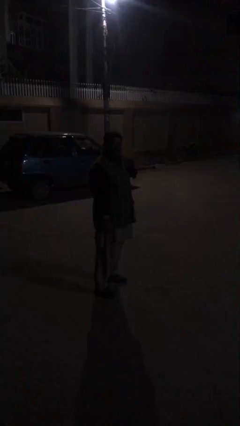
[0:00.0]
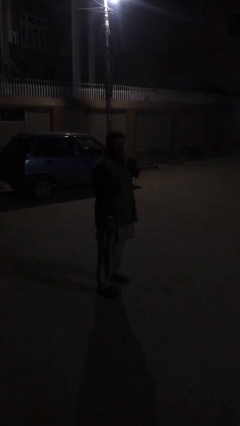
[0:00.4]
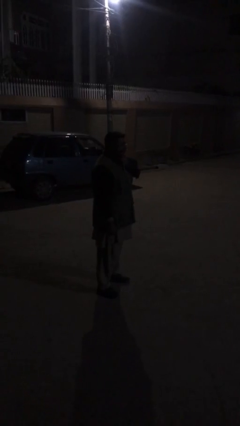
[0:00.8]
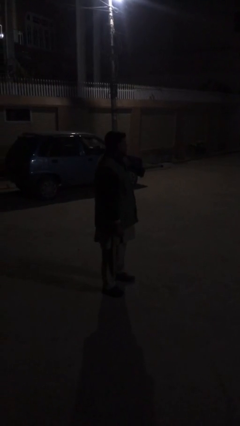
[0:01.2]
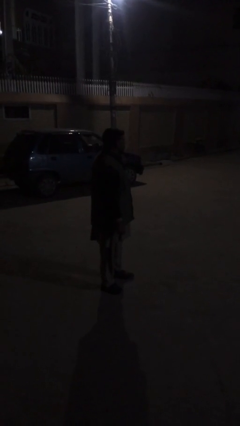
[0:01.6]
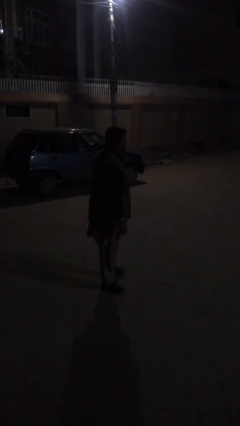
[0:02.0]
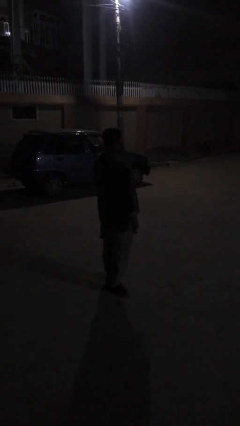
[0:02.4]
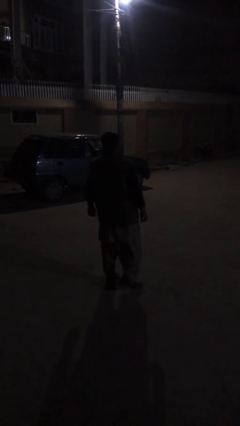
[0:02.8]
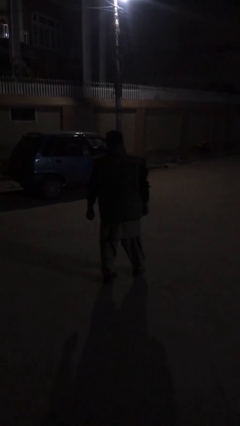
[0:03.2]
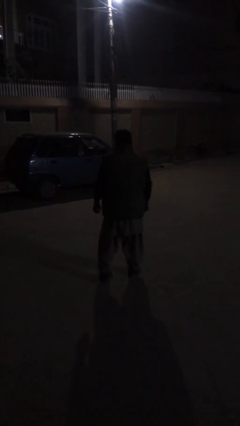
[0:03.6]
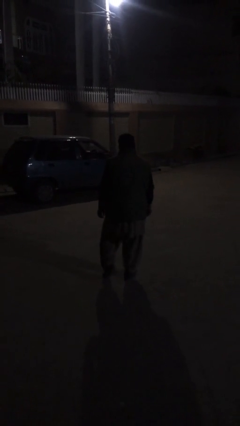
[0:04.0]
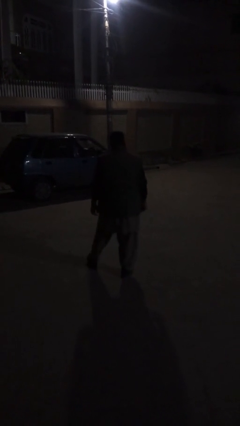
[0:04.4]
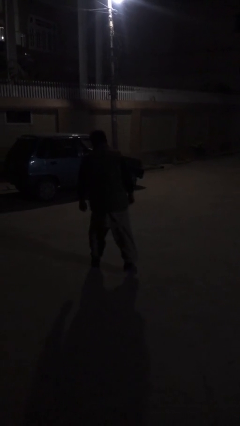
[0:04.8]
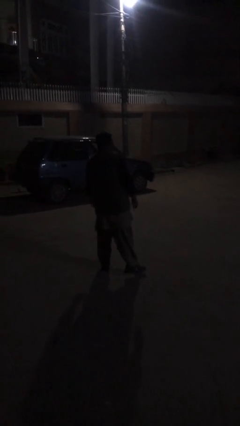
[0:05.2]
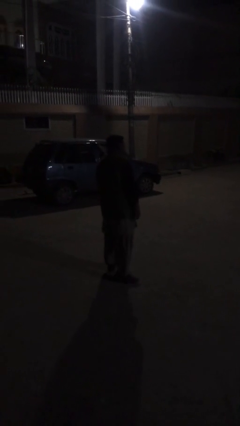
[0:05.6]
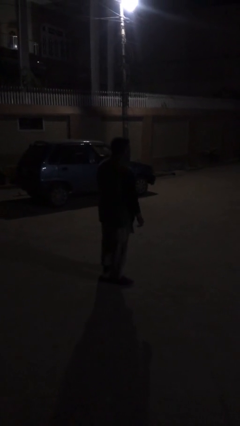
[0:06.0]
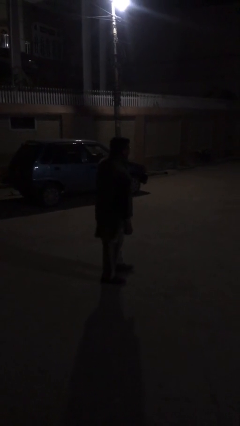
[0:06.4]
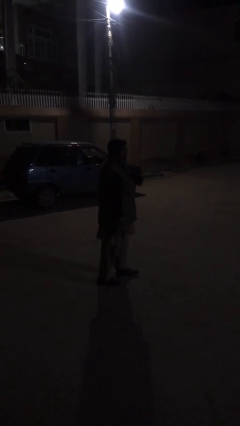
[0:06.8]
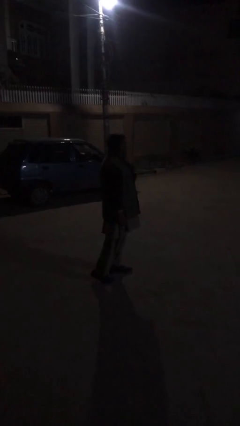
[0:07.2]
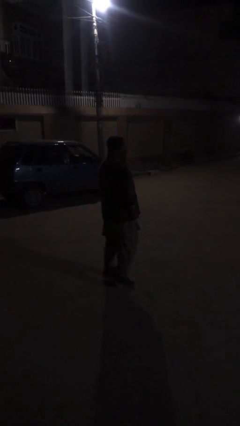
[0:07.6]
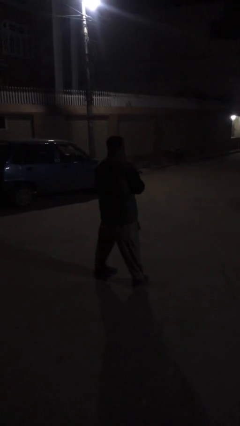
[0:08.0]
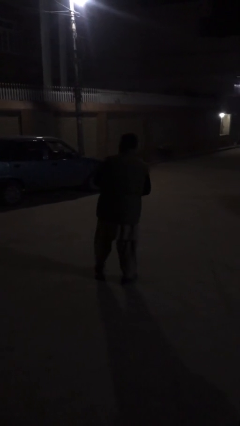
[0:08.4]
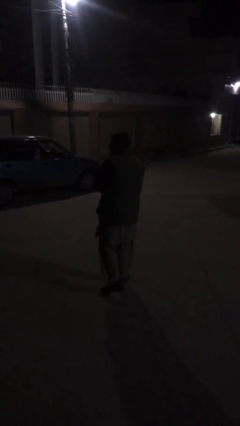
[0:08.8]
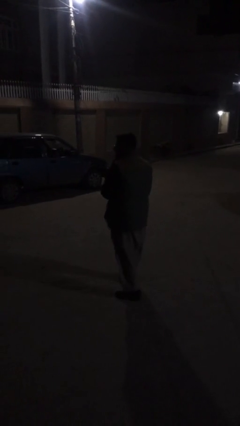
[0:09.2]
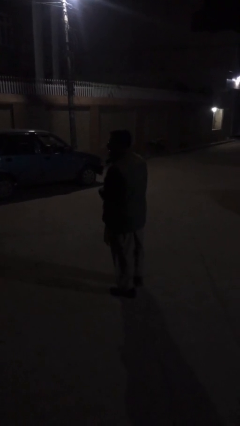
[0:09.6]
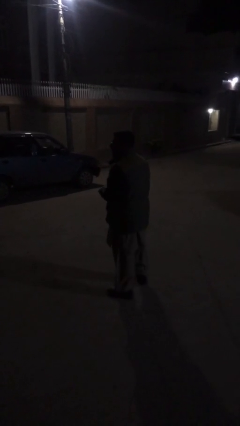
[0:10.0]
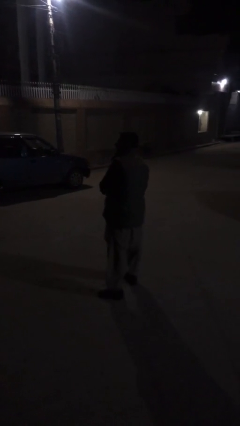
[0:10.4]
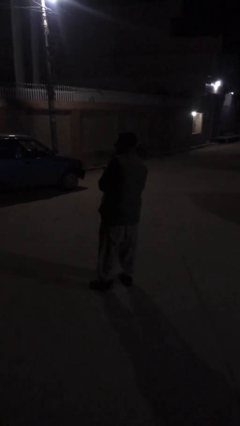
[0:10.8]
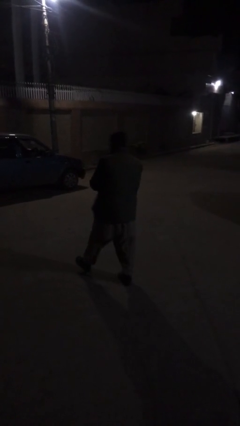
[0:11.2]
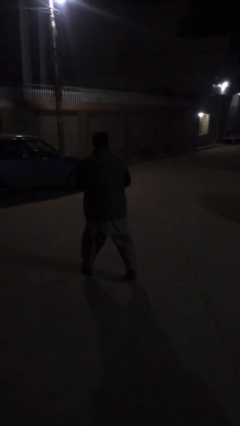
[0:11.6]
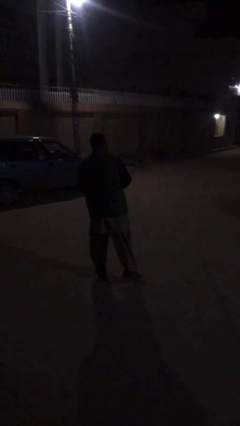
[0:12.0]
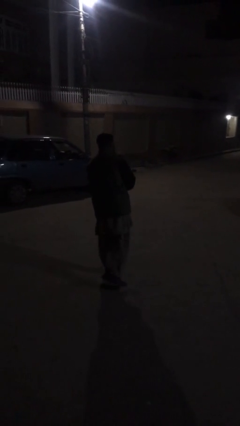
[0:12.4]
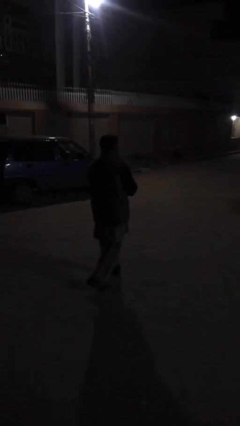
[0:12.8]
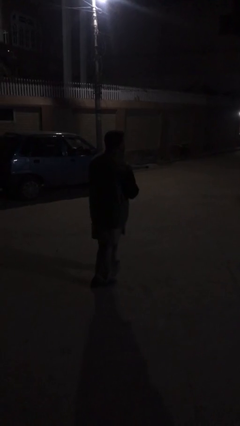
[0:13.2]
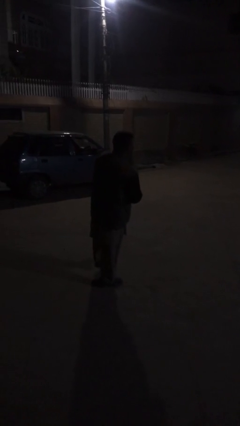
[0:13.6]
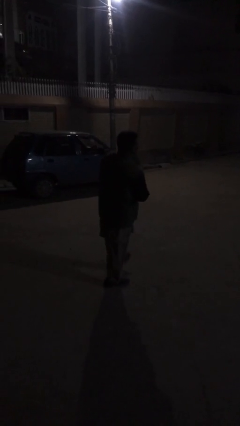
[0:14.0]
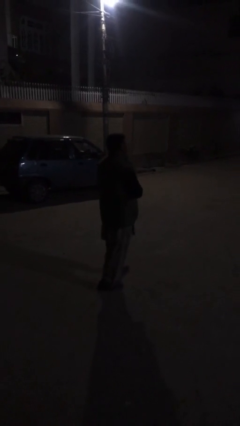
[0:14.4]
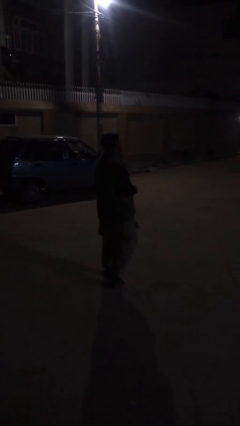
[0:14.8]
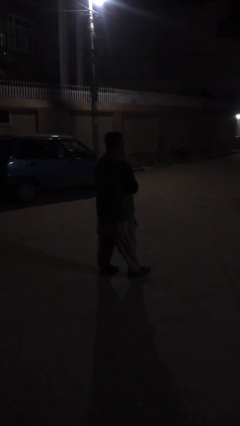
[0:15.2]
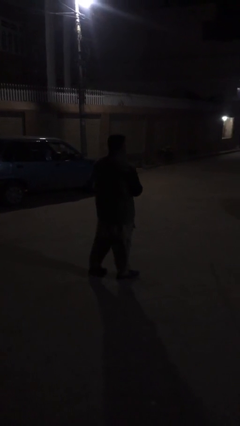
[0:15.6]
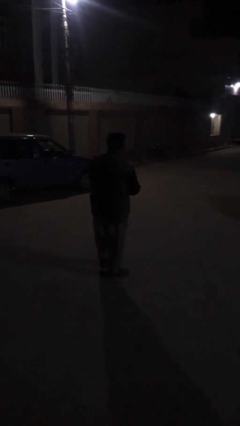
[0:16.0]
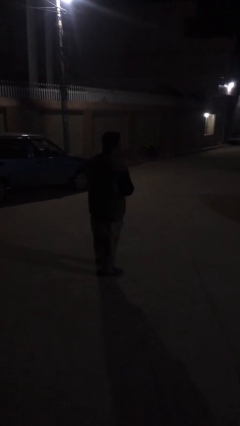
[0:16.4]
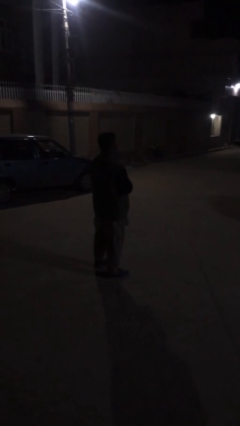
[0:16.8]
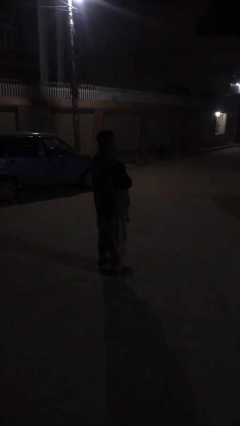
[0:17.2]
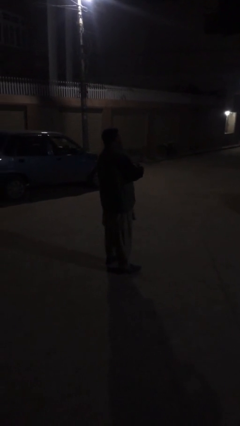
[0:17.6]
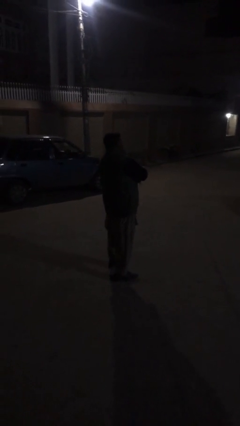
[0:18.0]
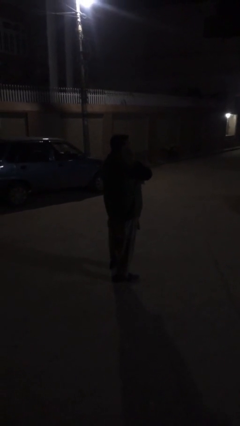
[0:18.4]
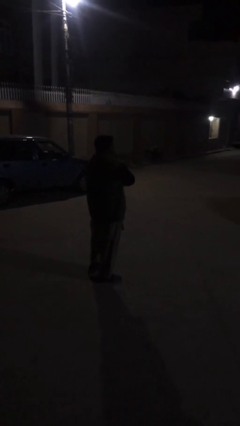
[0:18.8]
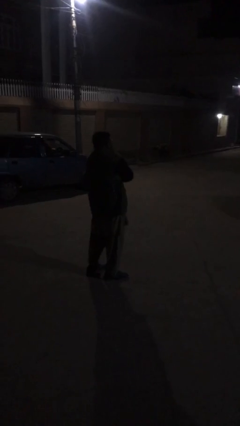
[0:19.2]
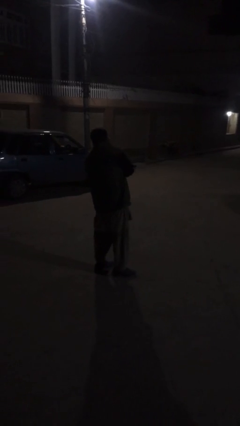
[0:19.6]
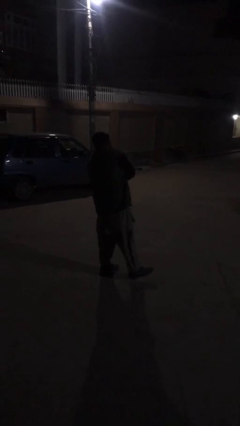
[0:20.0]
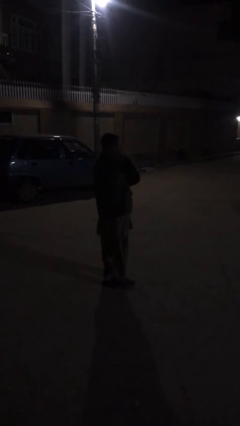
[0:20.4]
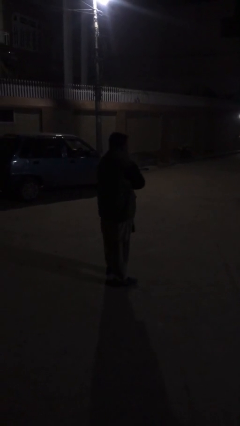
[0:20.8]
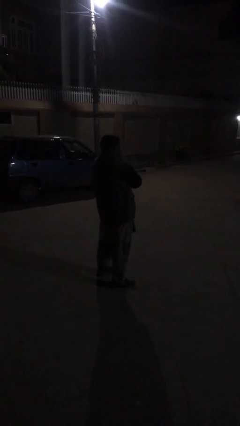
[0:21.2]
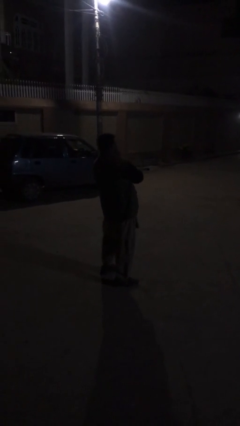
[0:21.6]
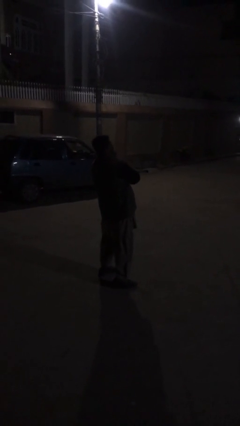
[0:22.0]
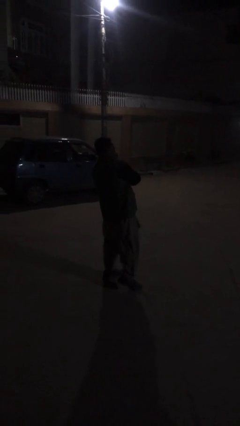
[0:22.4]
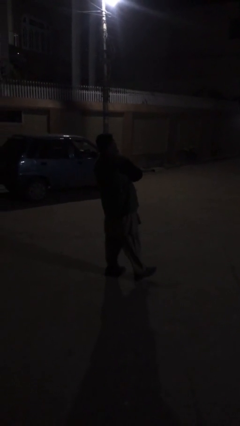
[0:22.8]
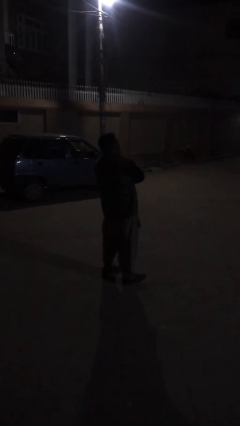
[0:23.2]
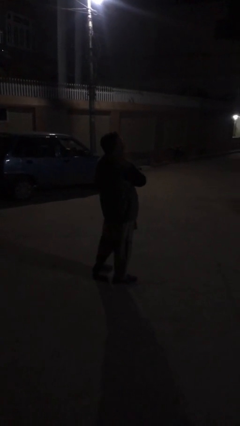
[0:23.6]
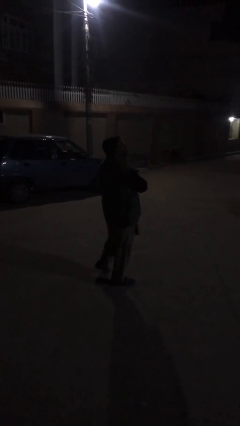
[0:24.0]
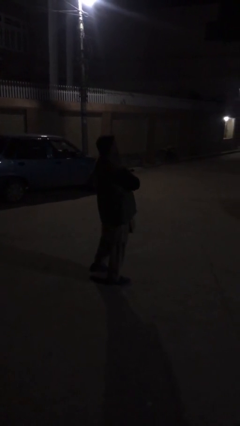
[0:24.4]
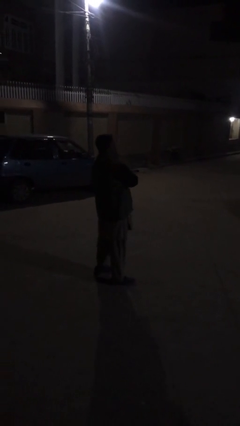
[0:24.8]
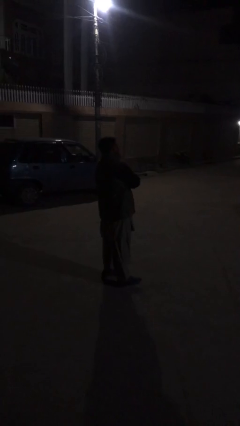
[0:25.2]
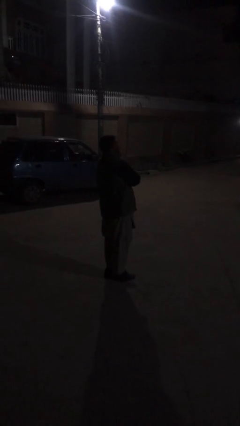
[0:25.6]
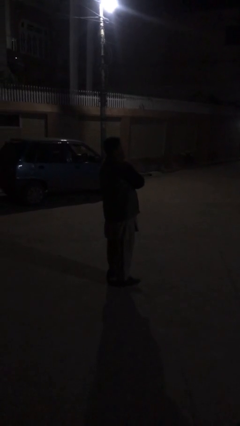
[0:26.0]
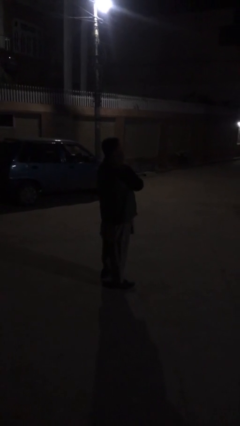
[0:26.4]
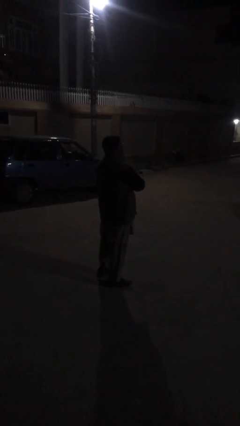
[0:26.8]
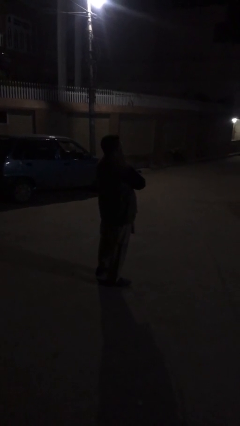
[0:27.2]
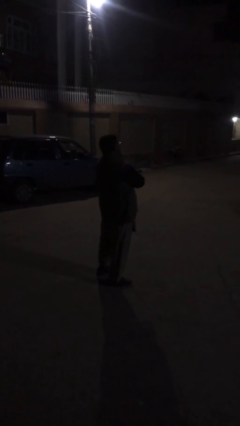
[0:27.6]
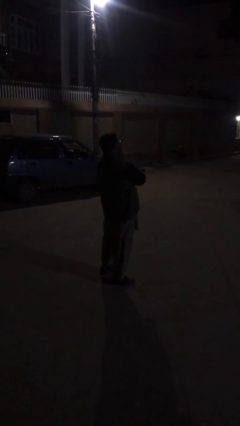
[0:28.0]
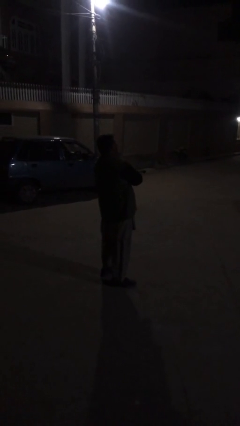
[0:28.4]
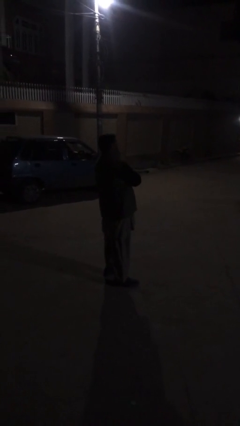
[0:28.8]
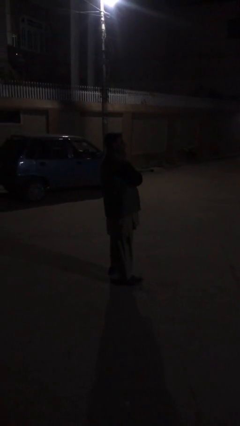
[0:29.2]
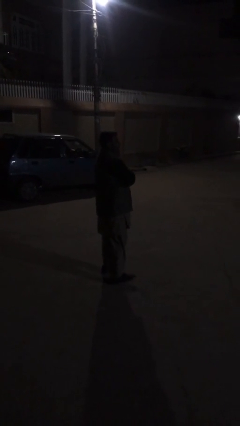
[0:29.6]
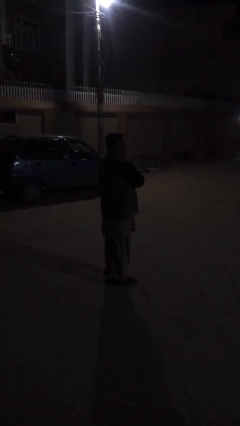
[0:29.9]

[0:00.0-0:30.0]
person walks

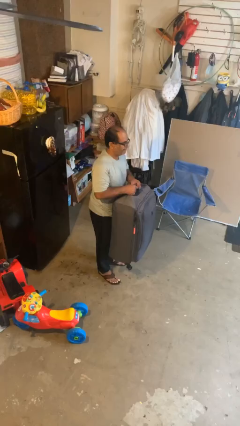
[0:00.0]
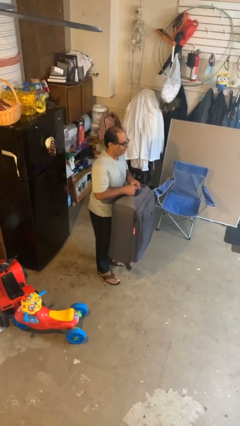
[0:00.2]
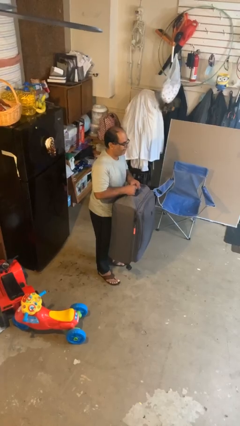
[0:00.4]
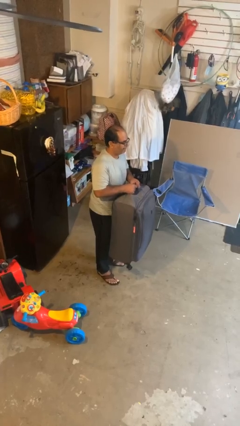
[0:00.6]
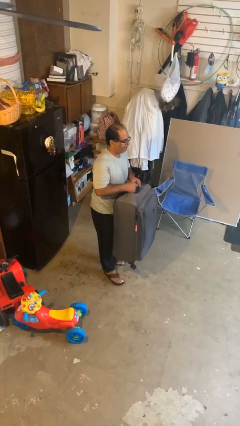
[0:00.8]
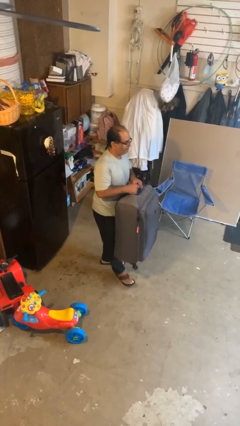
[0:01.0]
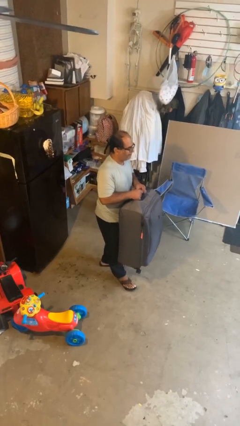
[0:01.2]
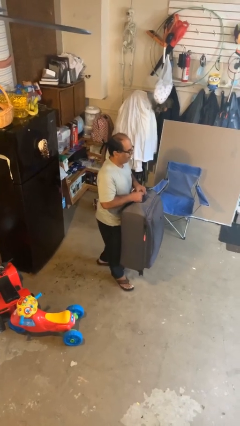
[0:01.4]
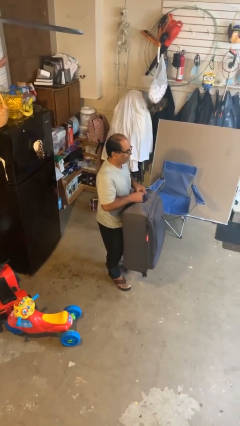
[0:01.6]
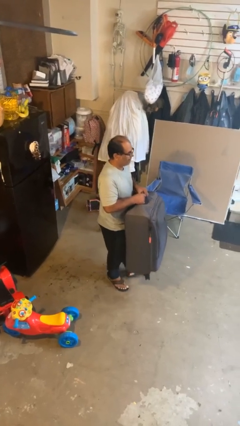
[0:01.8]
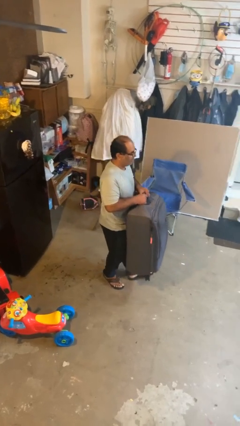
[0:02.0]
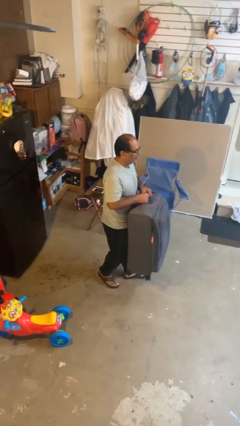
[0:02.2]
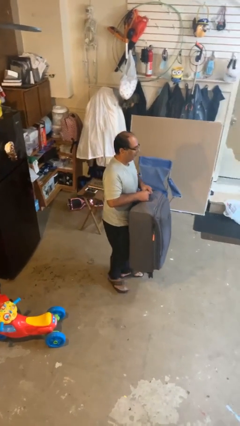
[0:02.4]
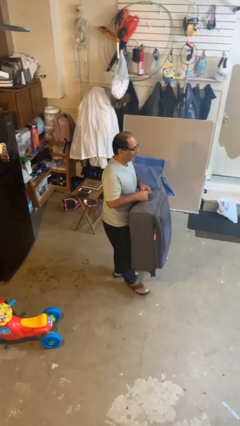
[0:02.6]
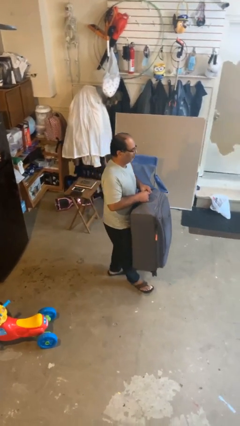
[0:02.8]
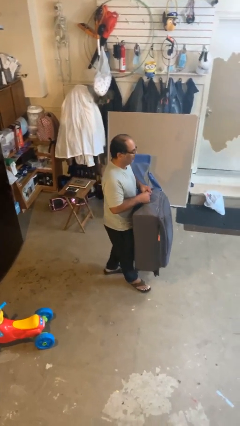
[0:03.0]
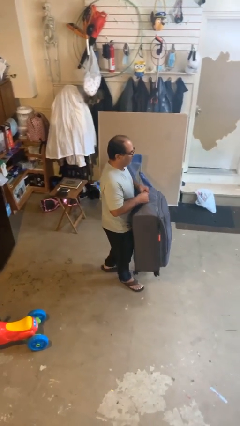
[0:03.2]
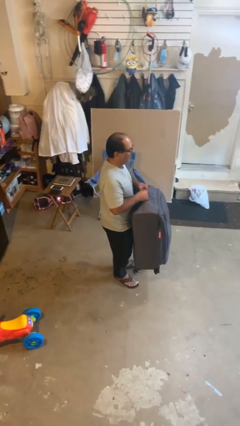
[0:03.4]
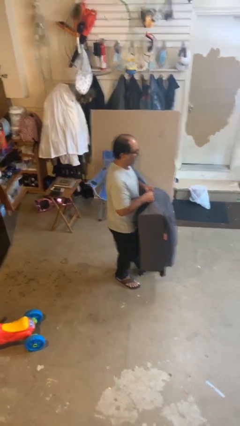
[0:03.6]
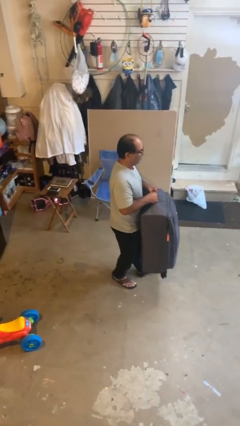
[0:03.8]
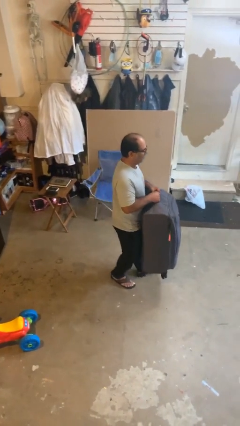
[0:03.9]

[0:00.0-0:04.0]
person carries heavy object
